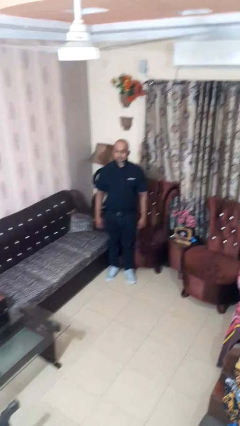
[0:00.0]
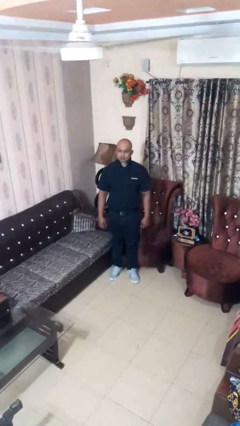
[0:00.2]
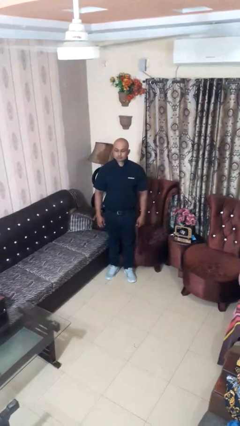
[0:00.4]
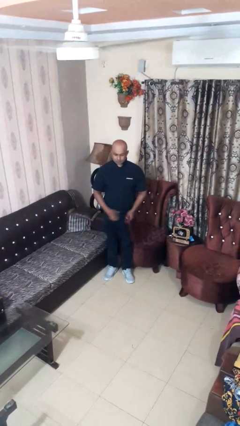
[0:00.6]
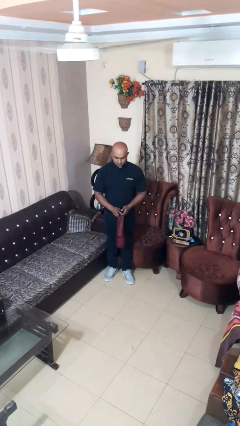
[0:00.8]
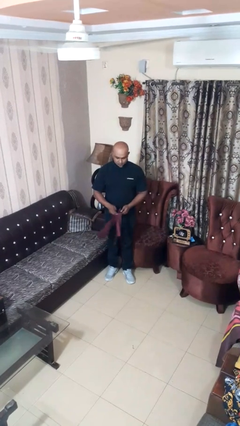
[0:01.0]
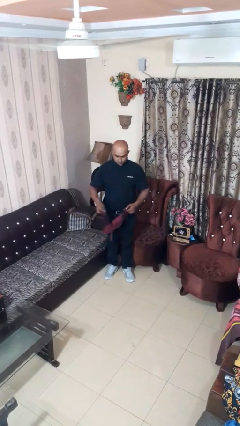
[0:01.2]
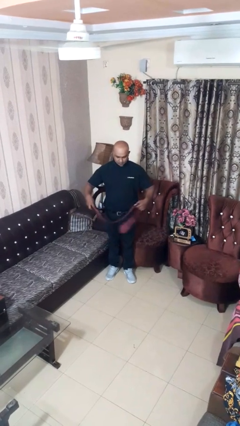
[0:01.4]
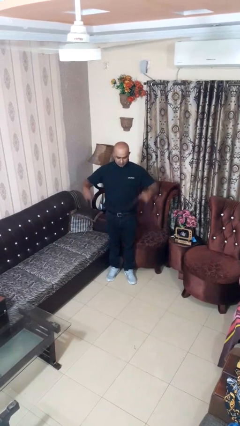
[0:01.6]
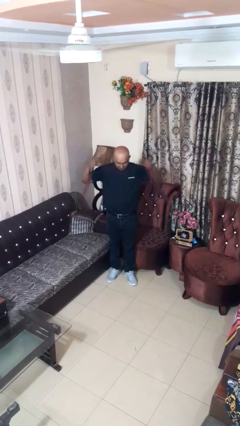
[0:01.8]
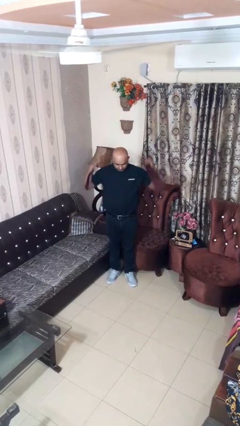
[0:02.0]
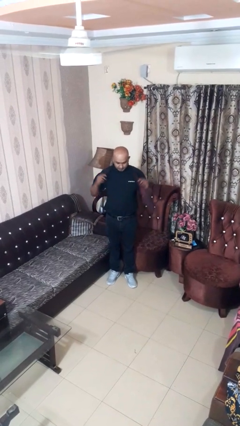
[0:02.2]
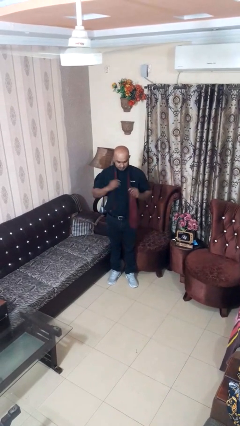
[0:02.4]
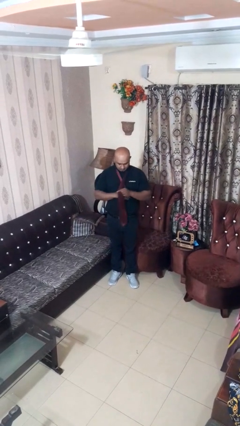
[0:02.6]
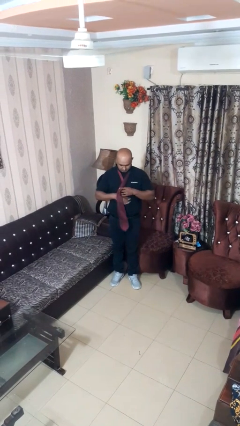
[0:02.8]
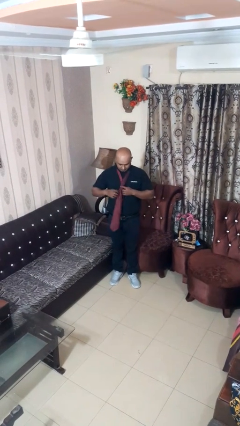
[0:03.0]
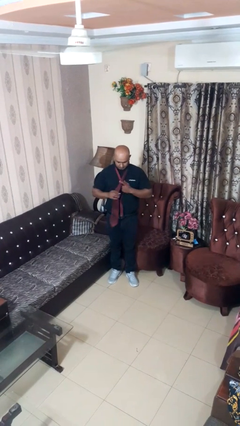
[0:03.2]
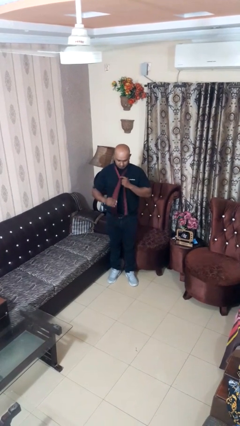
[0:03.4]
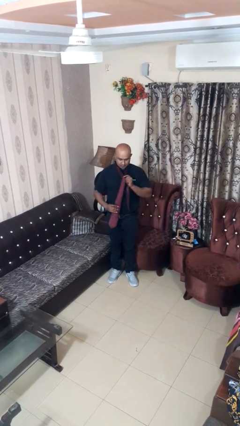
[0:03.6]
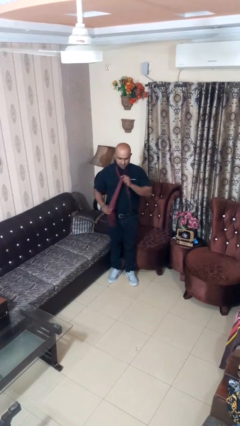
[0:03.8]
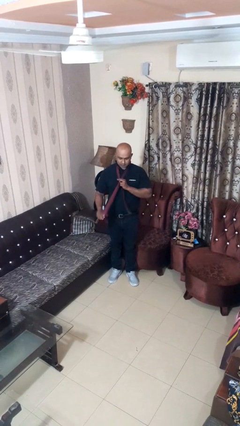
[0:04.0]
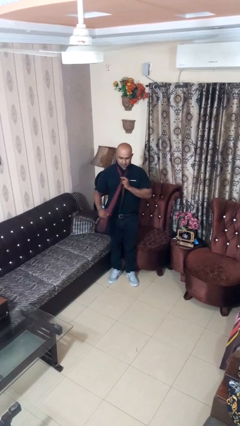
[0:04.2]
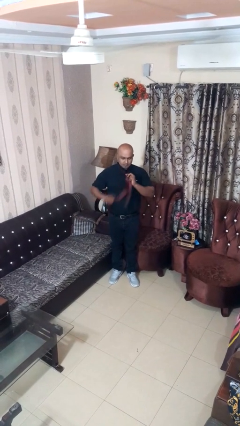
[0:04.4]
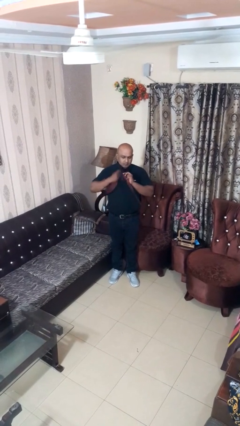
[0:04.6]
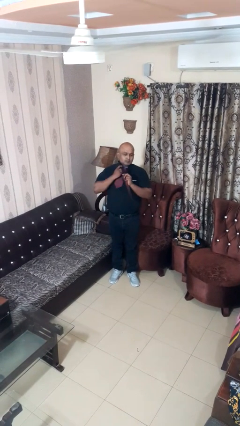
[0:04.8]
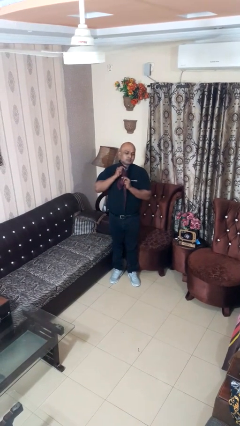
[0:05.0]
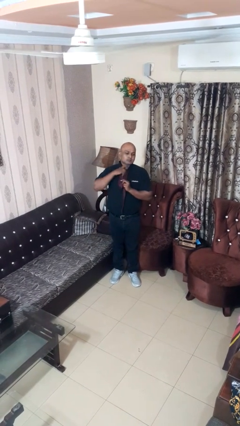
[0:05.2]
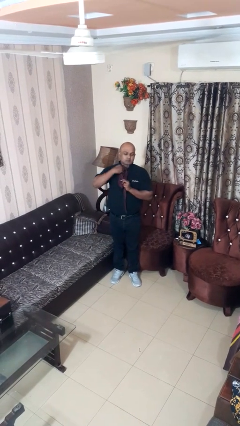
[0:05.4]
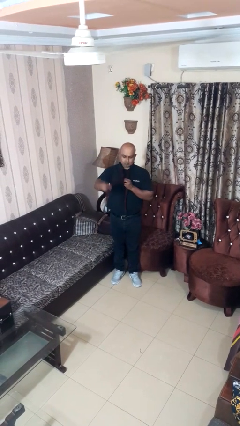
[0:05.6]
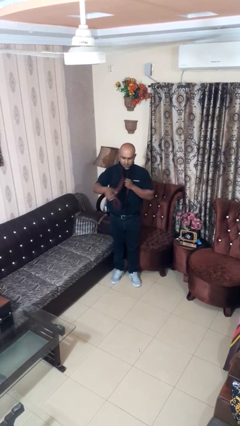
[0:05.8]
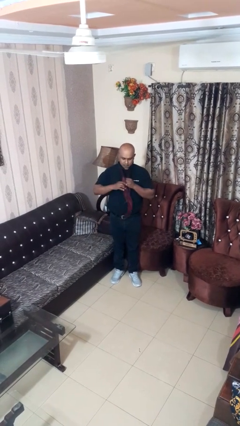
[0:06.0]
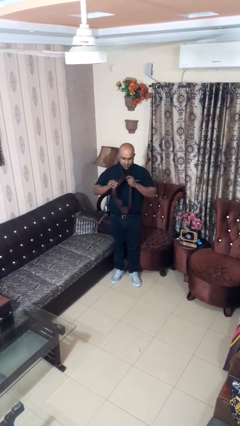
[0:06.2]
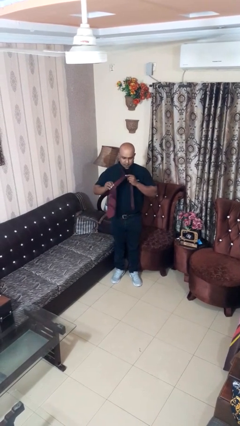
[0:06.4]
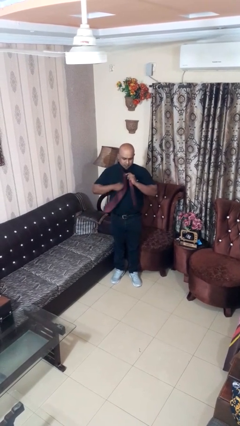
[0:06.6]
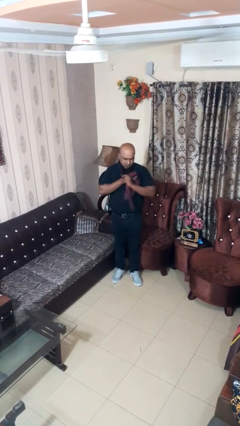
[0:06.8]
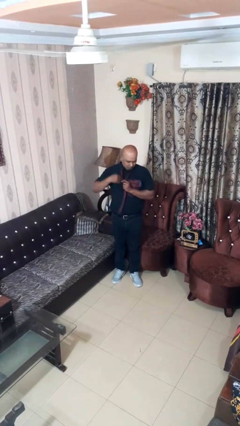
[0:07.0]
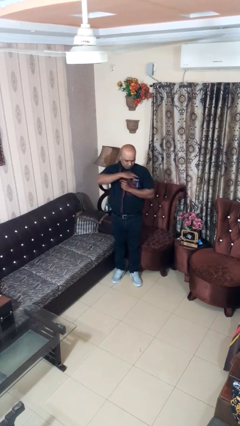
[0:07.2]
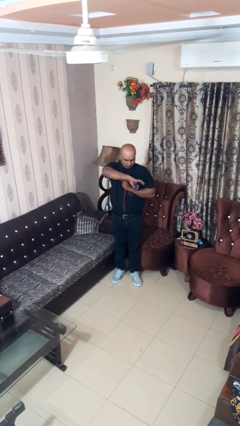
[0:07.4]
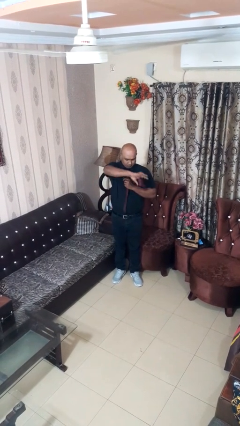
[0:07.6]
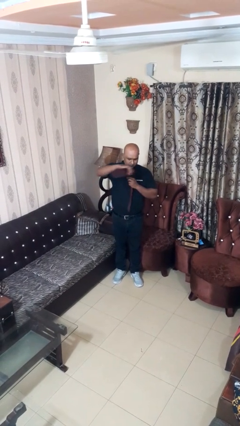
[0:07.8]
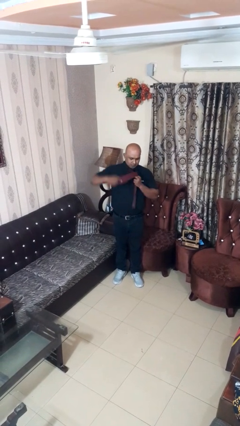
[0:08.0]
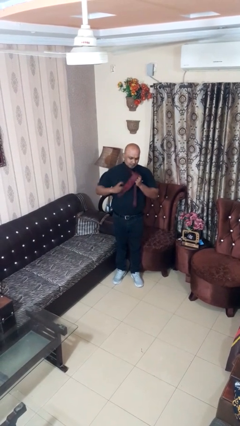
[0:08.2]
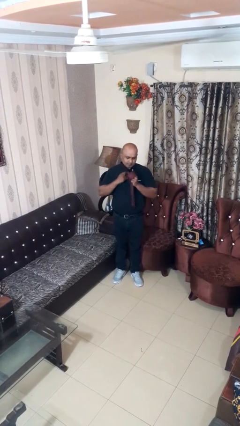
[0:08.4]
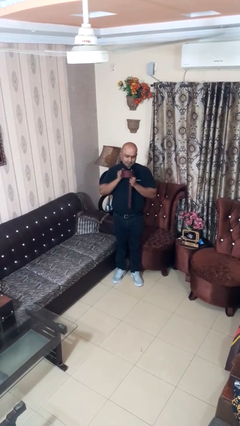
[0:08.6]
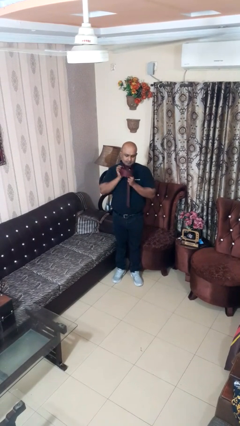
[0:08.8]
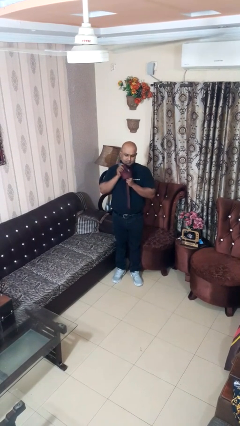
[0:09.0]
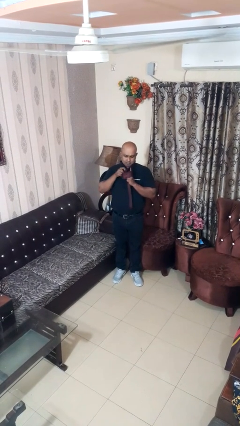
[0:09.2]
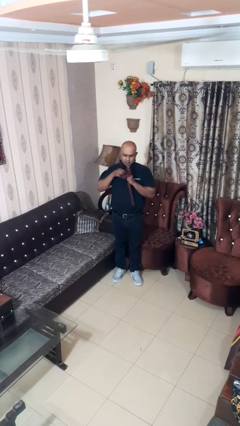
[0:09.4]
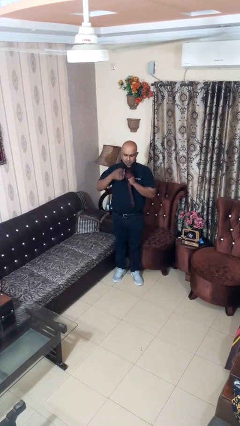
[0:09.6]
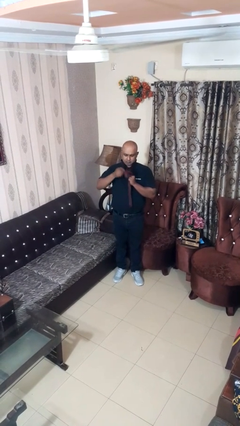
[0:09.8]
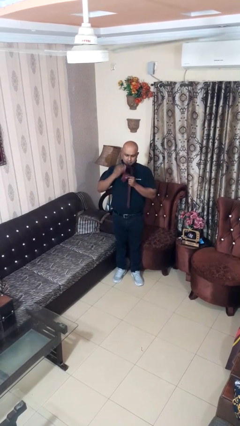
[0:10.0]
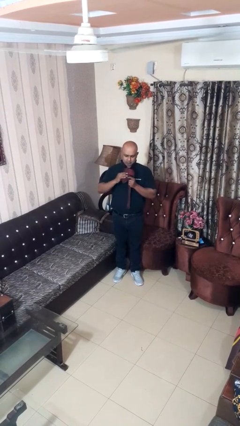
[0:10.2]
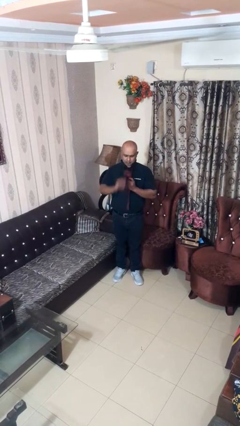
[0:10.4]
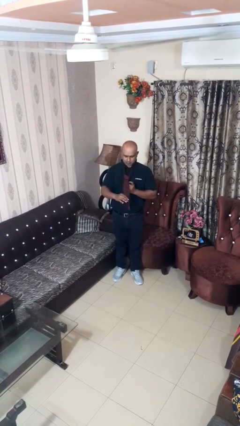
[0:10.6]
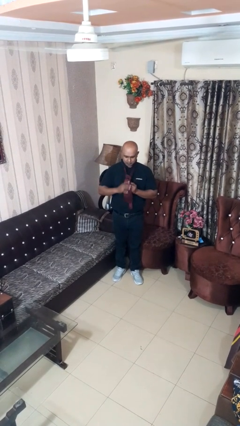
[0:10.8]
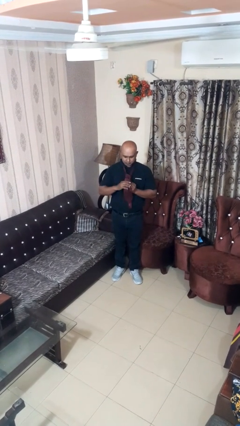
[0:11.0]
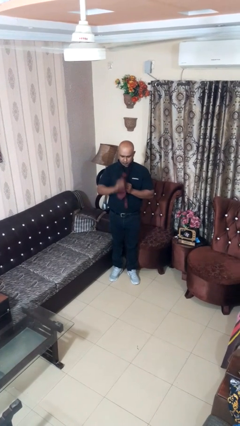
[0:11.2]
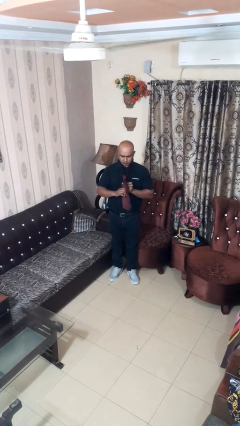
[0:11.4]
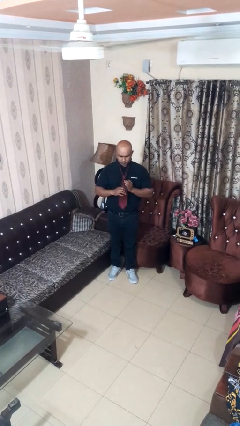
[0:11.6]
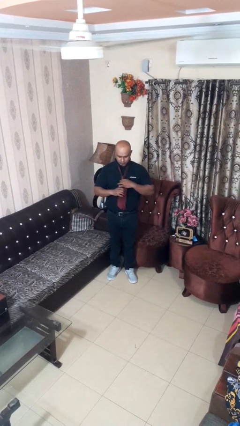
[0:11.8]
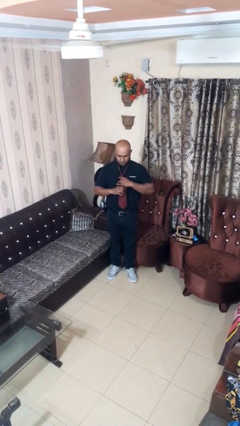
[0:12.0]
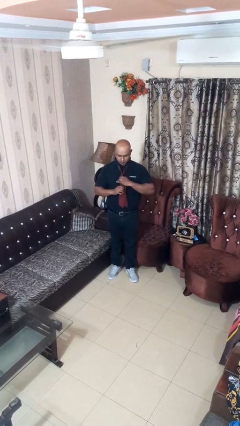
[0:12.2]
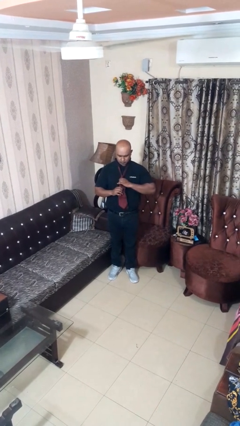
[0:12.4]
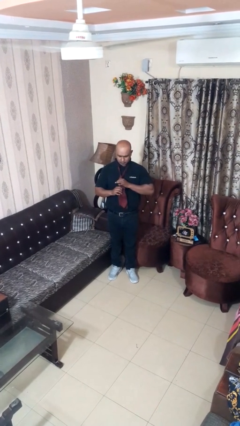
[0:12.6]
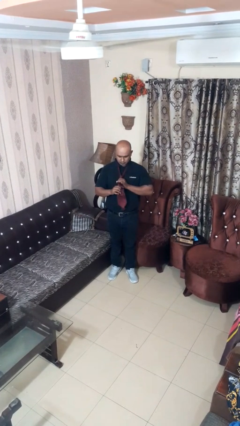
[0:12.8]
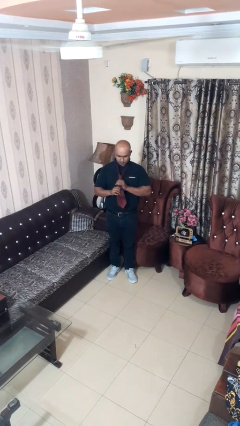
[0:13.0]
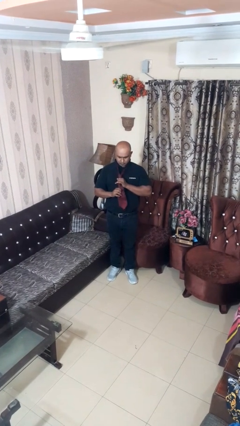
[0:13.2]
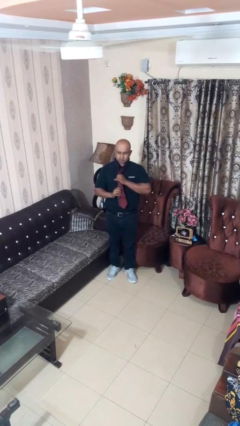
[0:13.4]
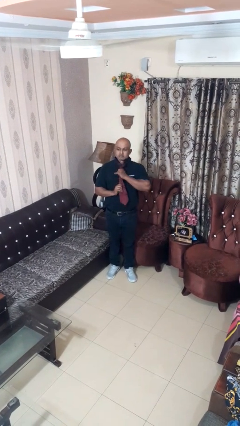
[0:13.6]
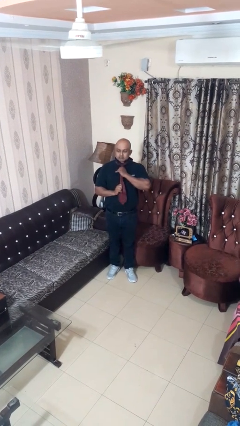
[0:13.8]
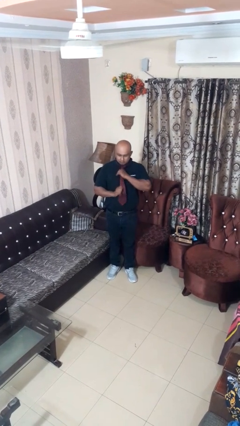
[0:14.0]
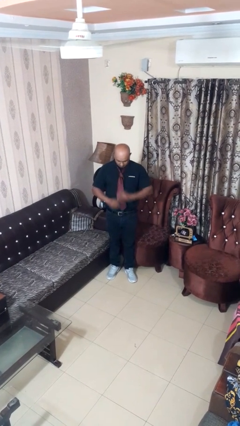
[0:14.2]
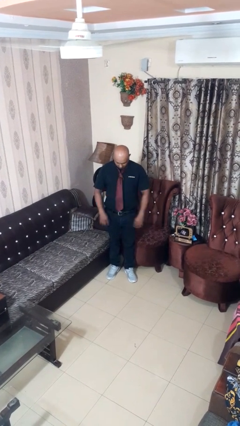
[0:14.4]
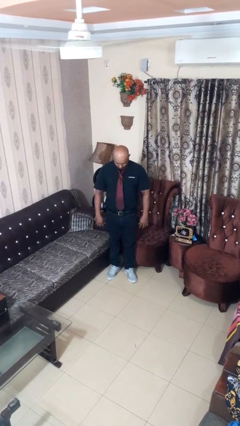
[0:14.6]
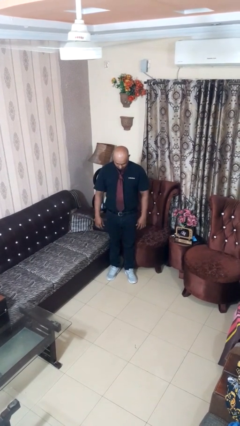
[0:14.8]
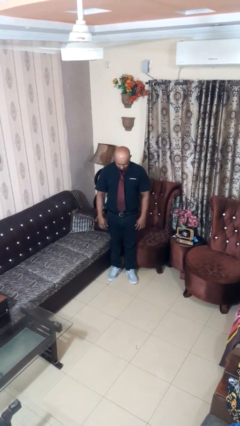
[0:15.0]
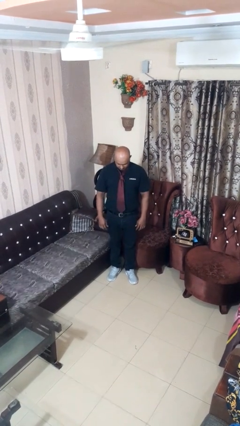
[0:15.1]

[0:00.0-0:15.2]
person puts on necktie

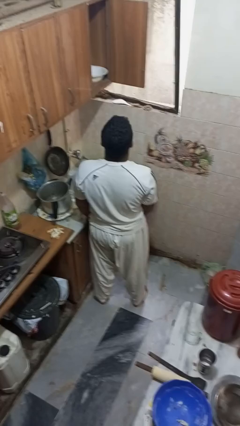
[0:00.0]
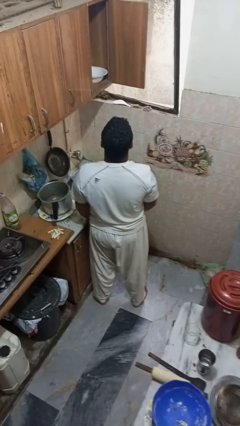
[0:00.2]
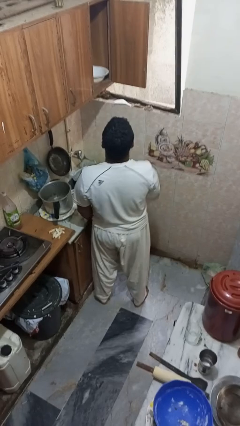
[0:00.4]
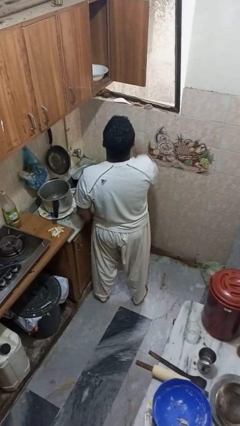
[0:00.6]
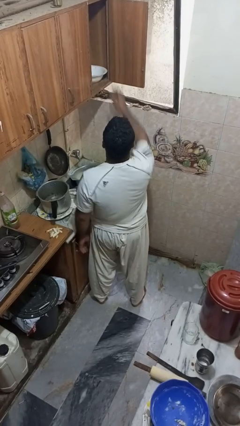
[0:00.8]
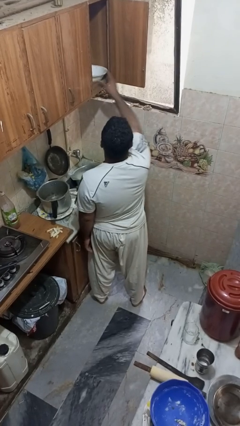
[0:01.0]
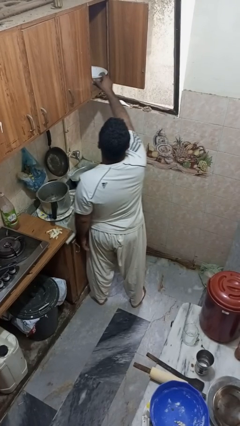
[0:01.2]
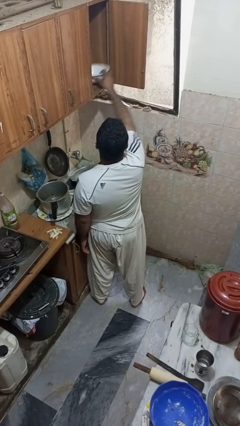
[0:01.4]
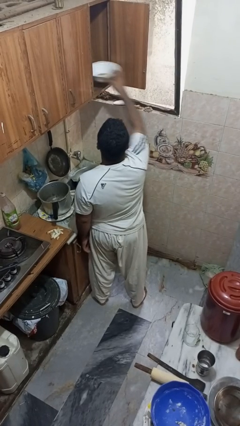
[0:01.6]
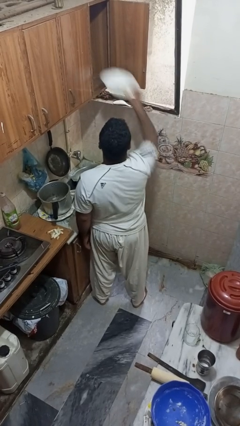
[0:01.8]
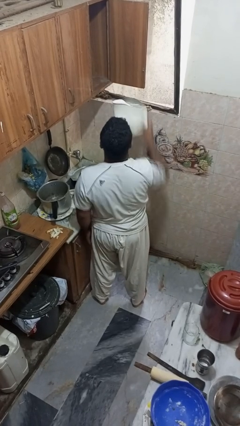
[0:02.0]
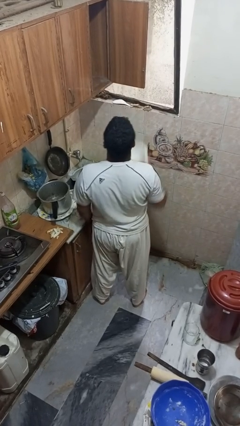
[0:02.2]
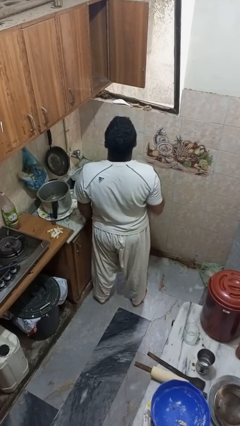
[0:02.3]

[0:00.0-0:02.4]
person takes object from cabinet

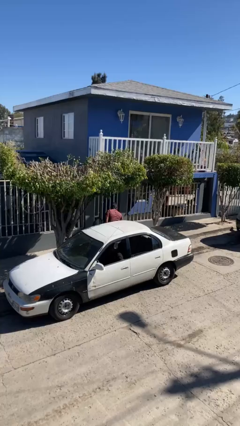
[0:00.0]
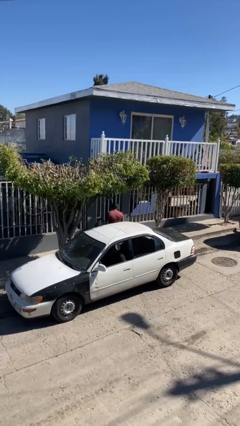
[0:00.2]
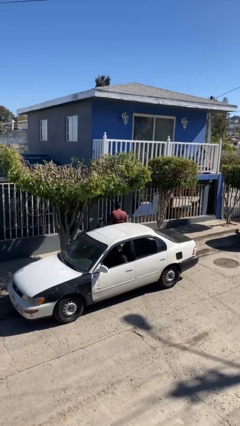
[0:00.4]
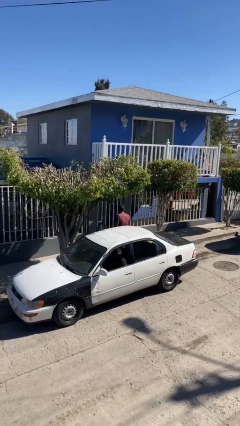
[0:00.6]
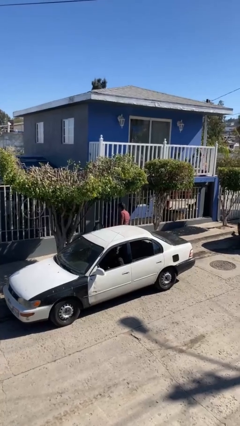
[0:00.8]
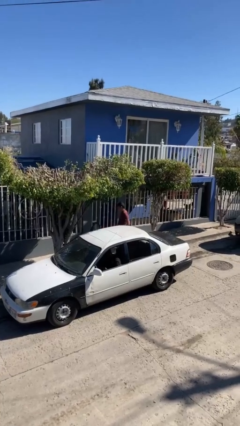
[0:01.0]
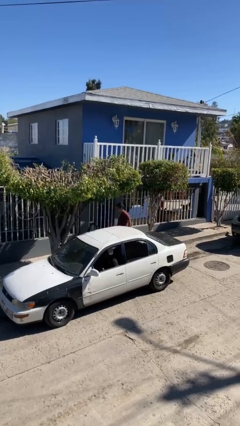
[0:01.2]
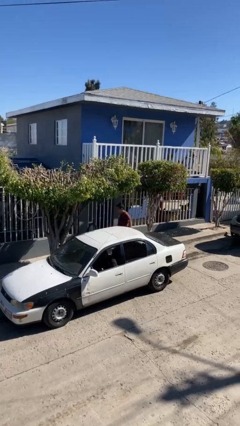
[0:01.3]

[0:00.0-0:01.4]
person exits car
